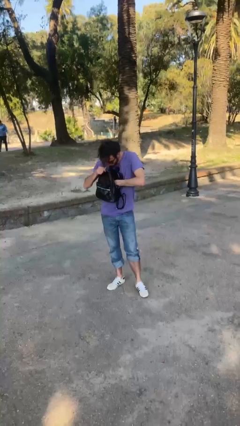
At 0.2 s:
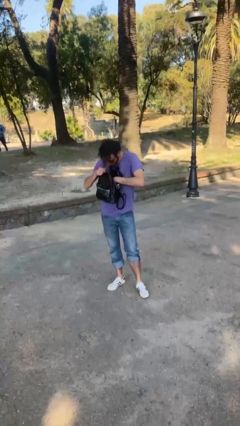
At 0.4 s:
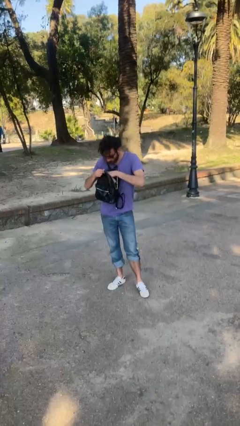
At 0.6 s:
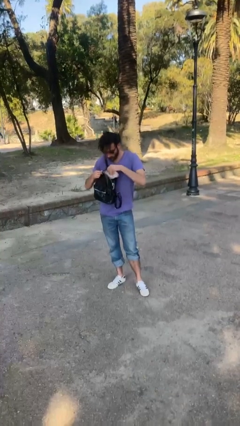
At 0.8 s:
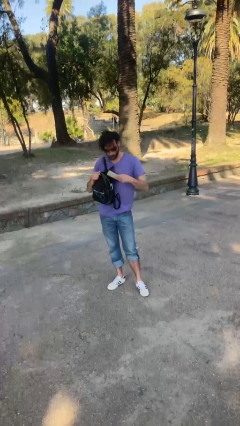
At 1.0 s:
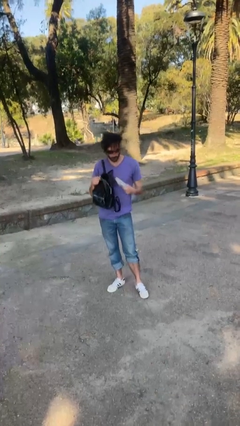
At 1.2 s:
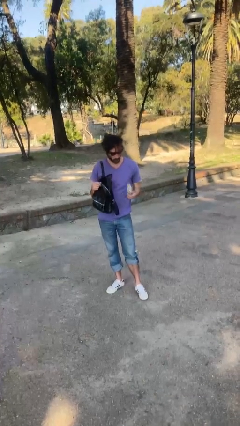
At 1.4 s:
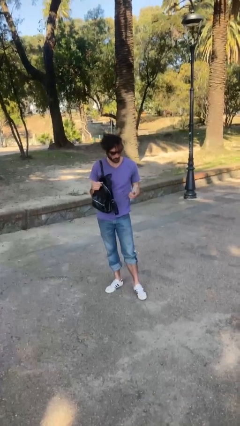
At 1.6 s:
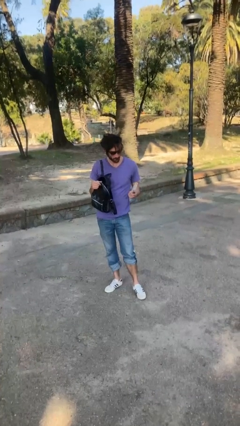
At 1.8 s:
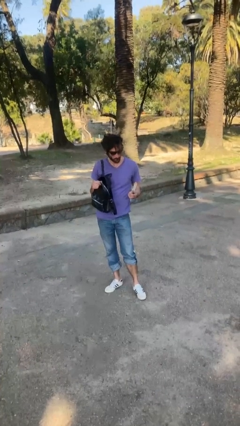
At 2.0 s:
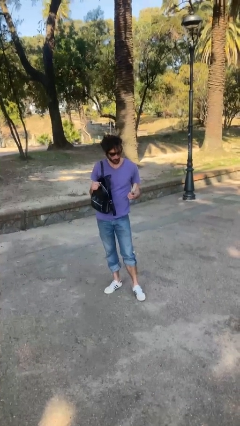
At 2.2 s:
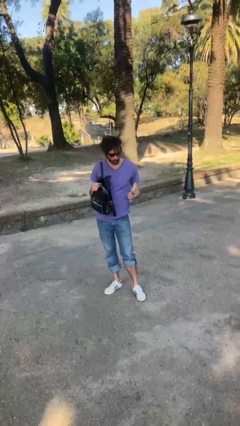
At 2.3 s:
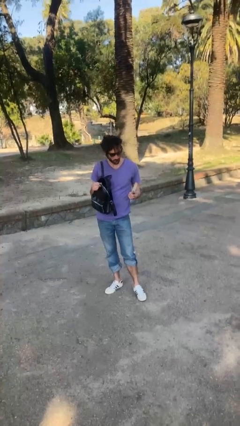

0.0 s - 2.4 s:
person takes object from purse

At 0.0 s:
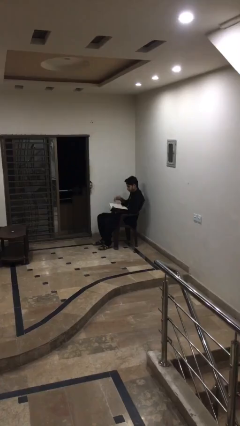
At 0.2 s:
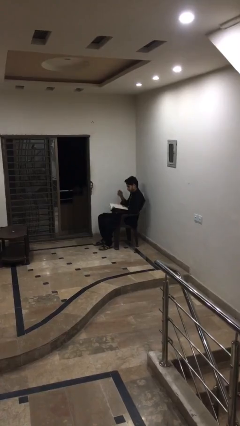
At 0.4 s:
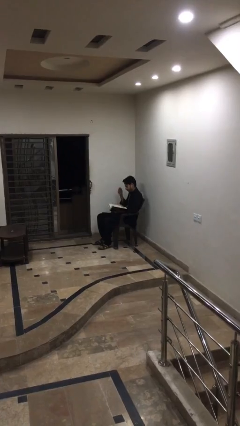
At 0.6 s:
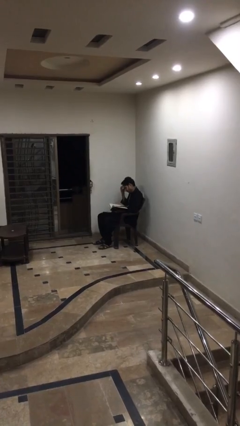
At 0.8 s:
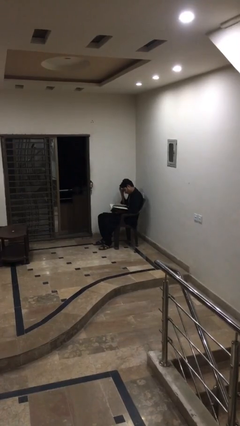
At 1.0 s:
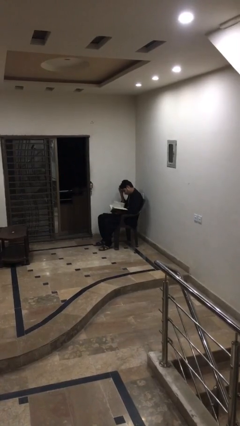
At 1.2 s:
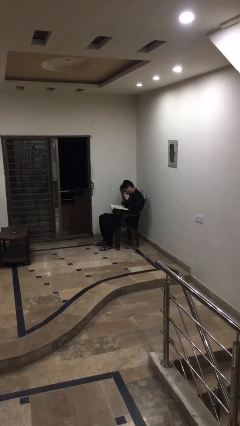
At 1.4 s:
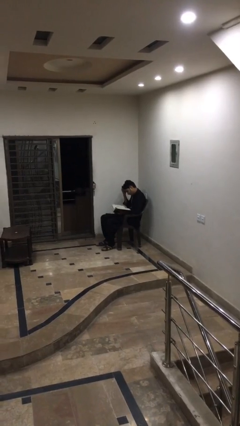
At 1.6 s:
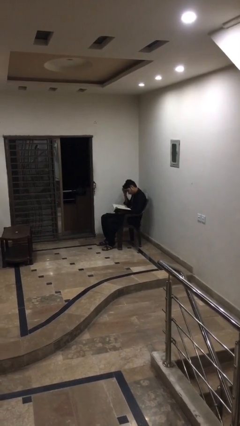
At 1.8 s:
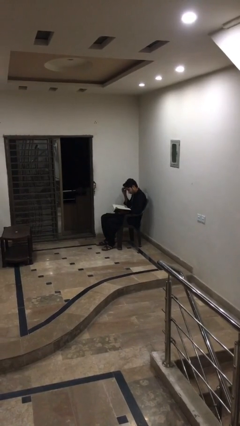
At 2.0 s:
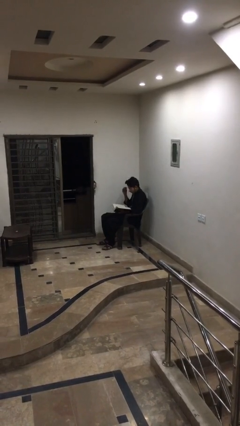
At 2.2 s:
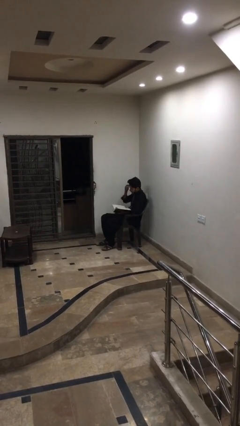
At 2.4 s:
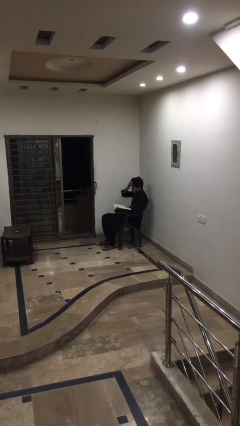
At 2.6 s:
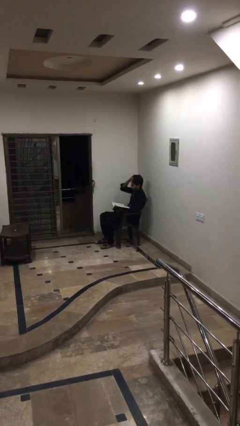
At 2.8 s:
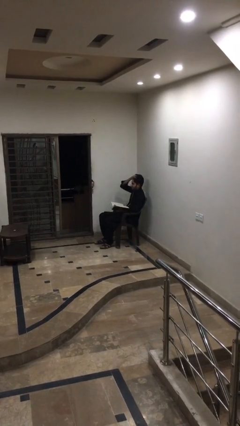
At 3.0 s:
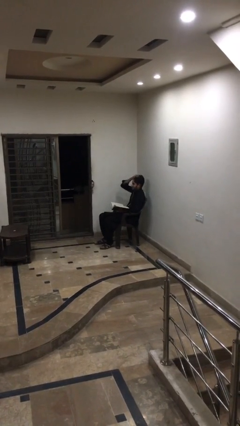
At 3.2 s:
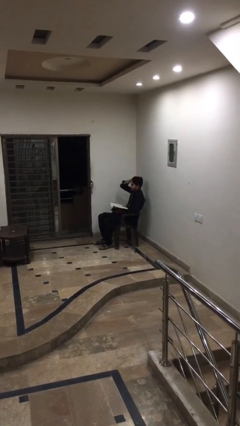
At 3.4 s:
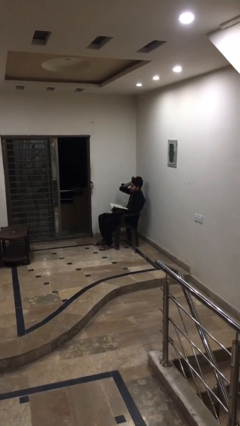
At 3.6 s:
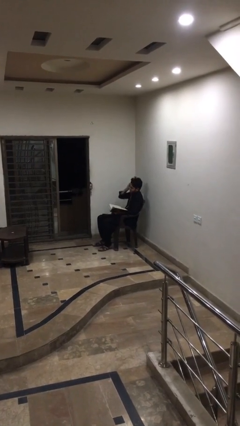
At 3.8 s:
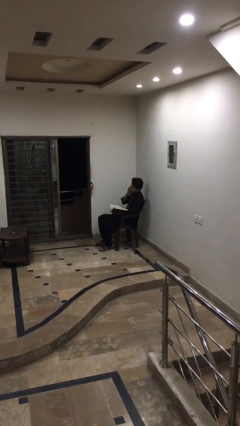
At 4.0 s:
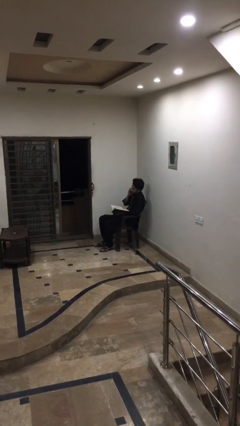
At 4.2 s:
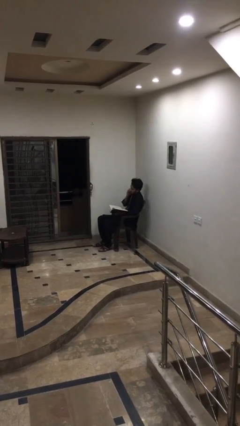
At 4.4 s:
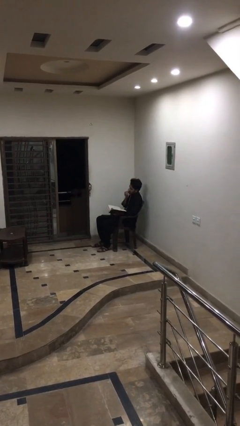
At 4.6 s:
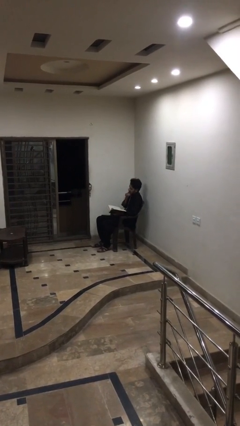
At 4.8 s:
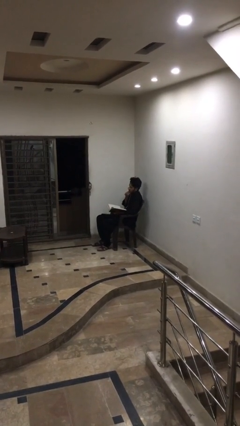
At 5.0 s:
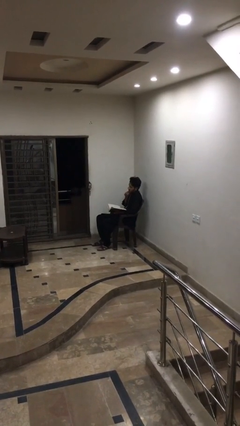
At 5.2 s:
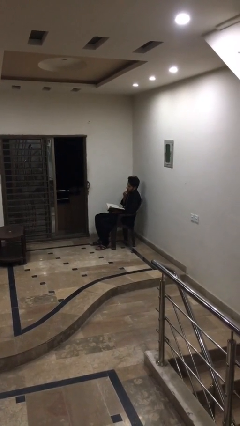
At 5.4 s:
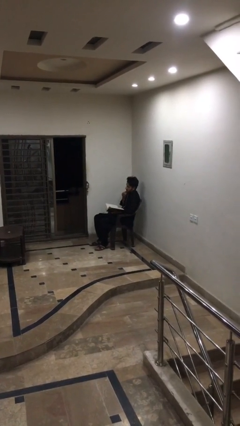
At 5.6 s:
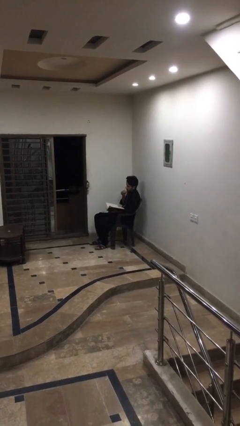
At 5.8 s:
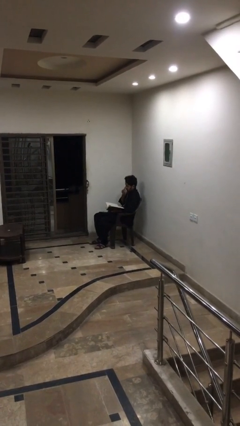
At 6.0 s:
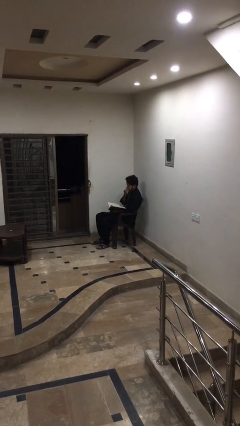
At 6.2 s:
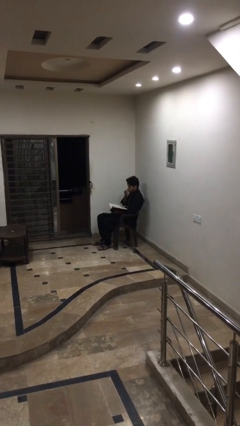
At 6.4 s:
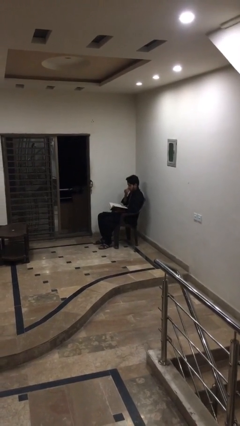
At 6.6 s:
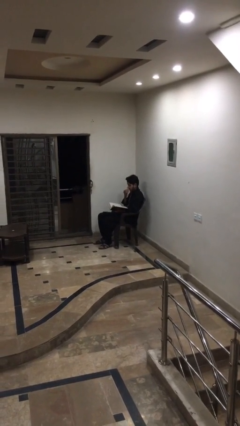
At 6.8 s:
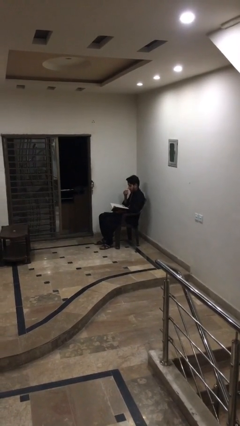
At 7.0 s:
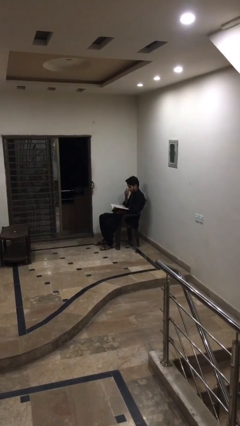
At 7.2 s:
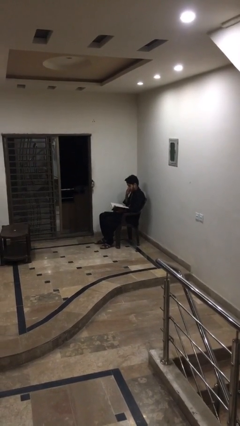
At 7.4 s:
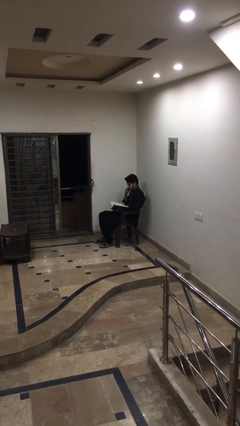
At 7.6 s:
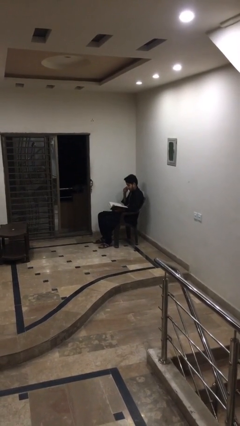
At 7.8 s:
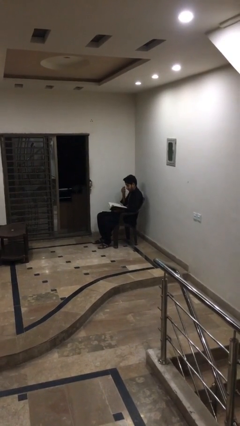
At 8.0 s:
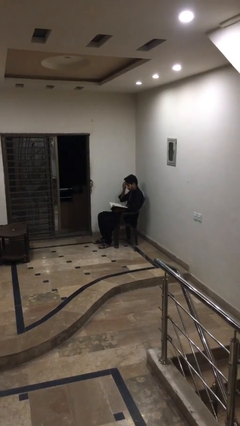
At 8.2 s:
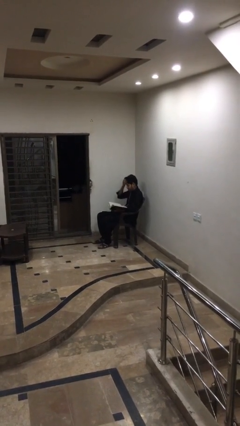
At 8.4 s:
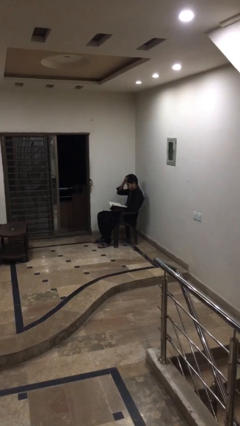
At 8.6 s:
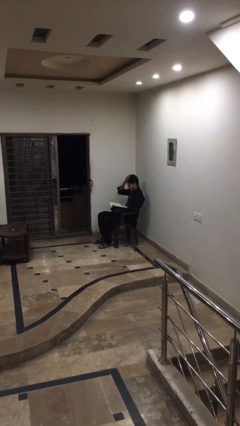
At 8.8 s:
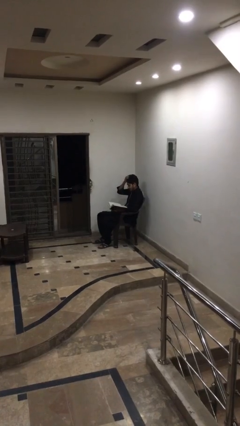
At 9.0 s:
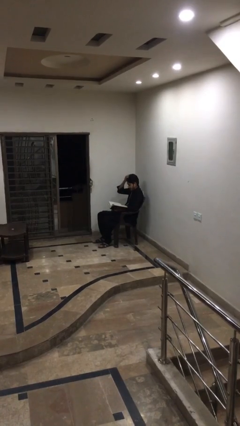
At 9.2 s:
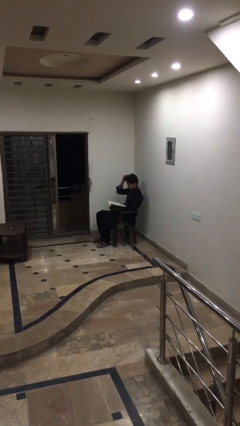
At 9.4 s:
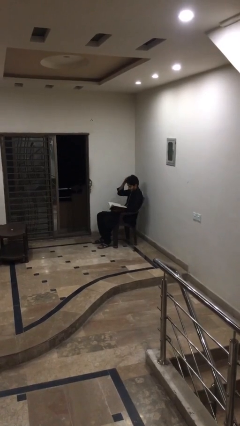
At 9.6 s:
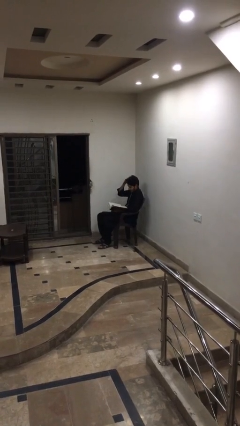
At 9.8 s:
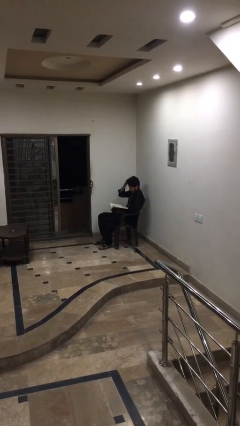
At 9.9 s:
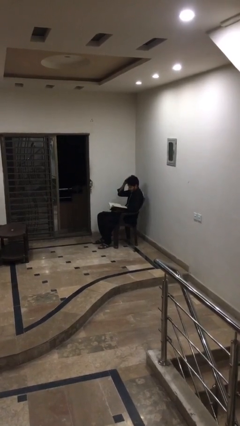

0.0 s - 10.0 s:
person reads document

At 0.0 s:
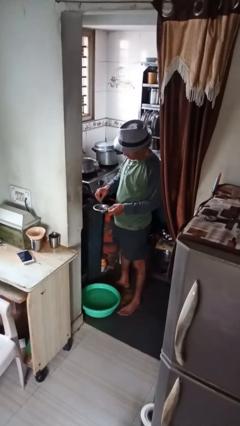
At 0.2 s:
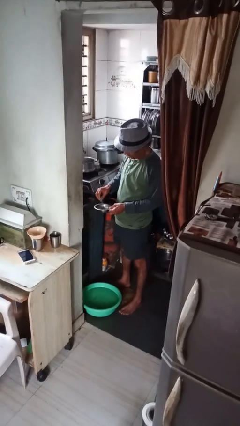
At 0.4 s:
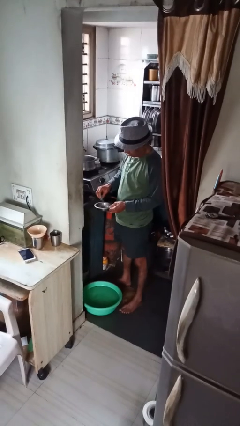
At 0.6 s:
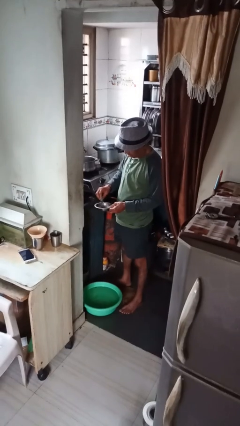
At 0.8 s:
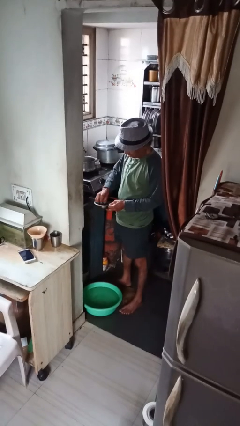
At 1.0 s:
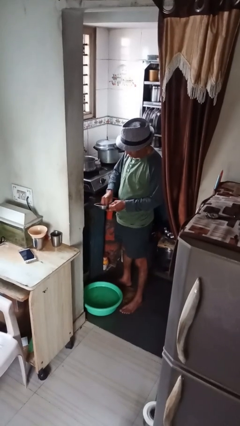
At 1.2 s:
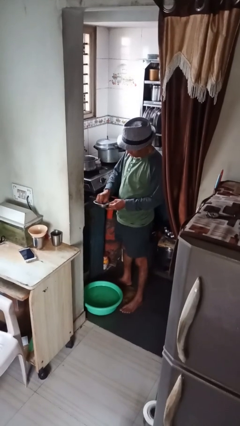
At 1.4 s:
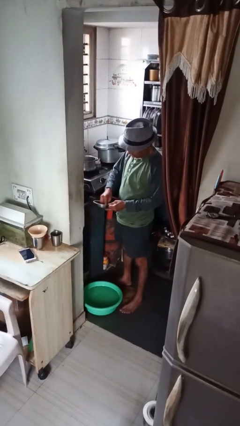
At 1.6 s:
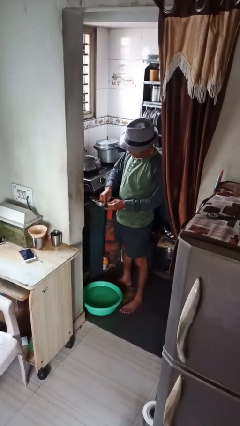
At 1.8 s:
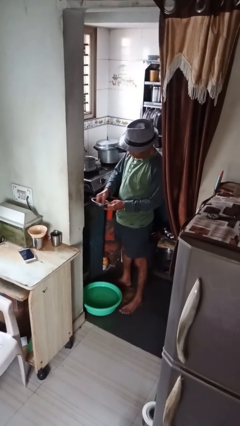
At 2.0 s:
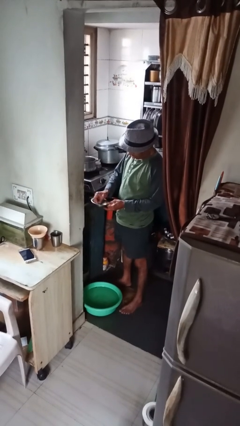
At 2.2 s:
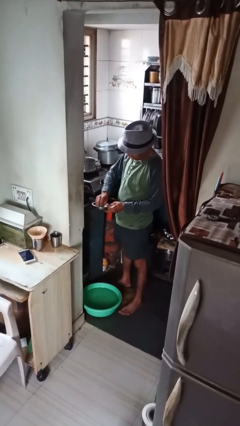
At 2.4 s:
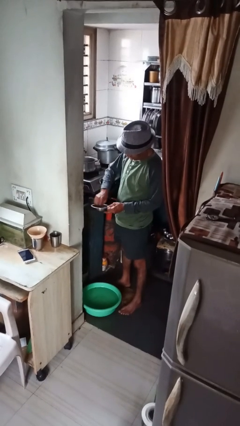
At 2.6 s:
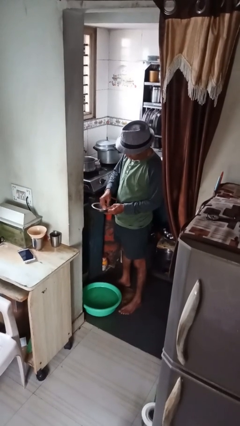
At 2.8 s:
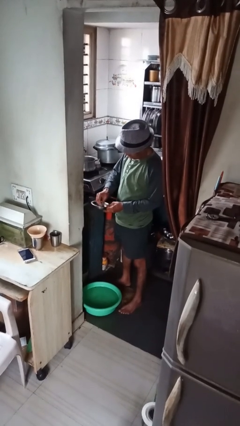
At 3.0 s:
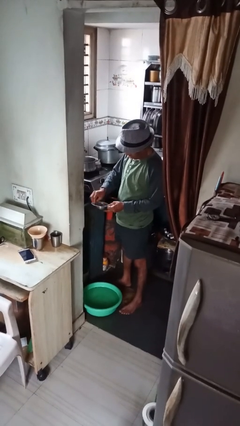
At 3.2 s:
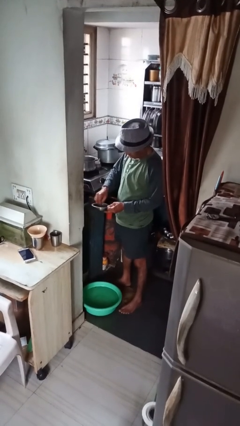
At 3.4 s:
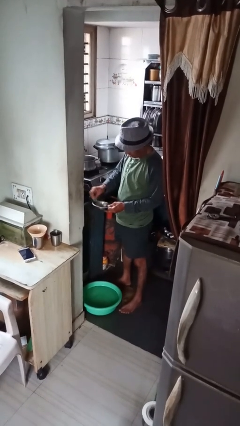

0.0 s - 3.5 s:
person washes dish

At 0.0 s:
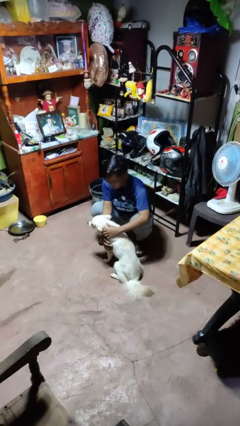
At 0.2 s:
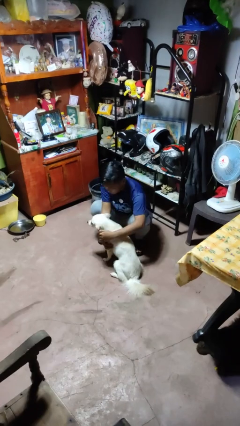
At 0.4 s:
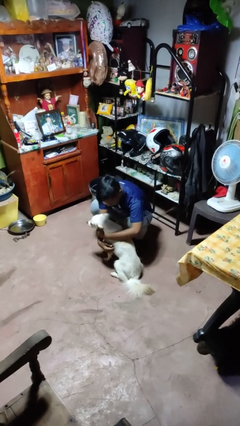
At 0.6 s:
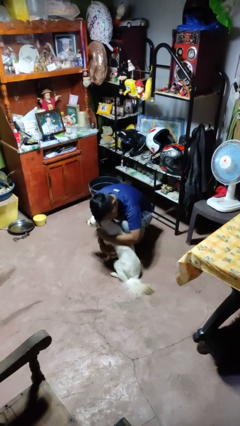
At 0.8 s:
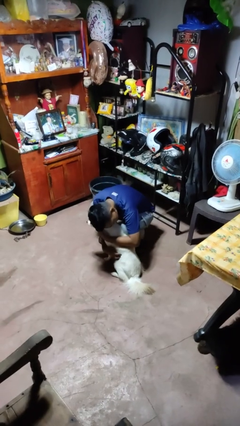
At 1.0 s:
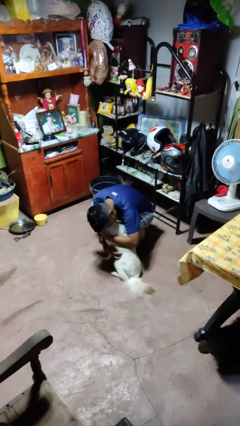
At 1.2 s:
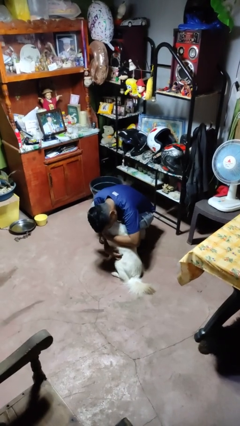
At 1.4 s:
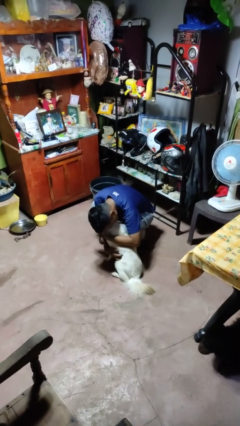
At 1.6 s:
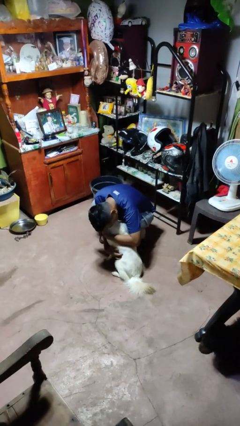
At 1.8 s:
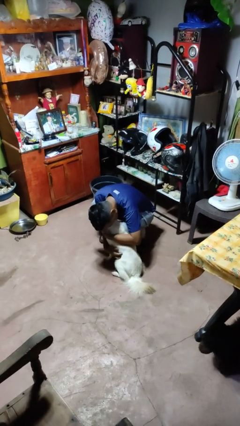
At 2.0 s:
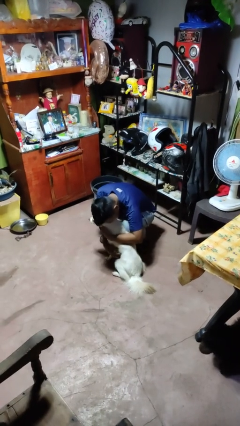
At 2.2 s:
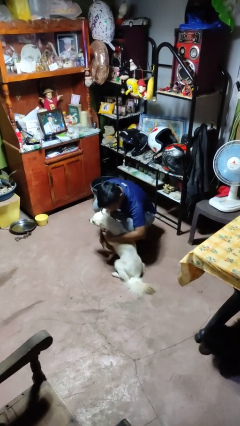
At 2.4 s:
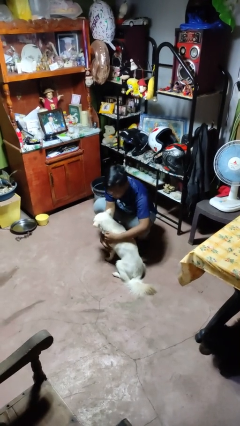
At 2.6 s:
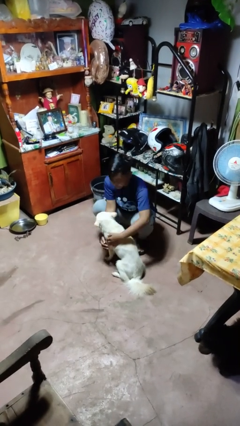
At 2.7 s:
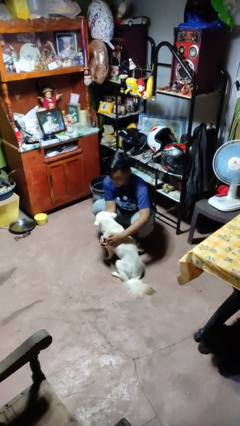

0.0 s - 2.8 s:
person hugs dog
